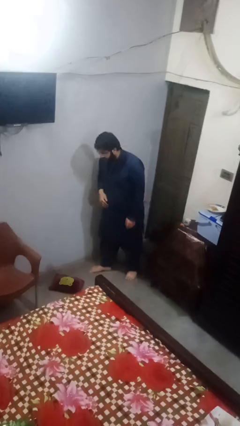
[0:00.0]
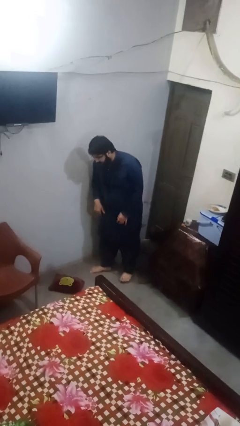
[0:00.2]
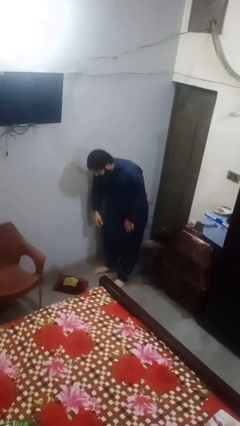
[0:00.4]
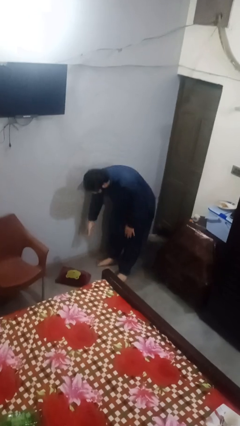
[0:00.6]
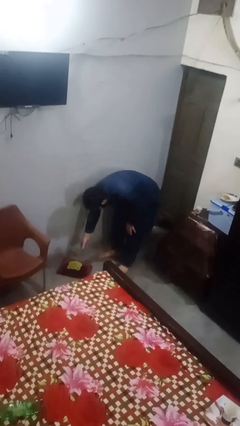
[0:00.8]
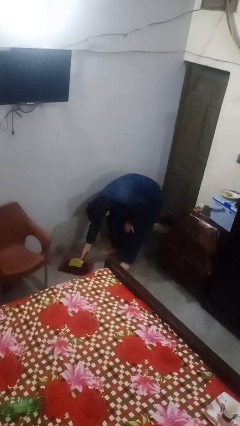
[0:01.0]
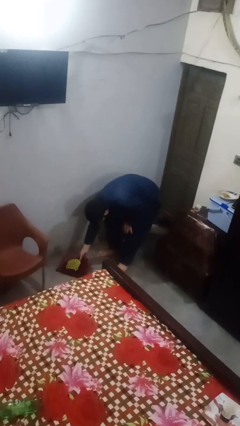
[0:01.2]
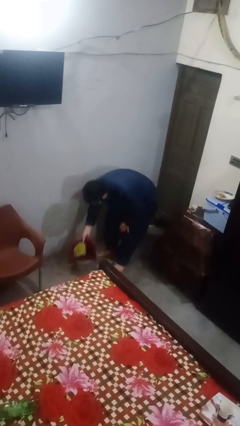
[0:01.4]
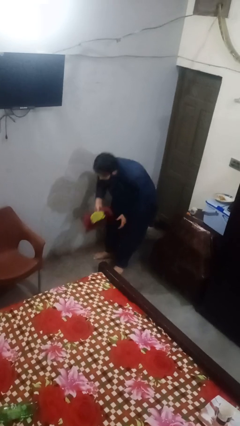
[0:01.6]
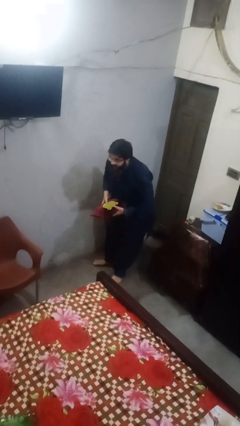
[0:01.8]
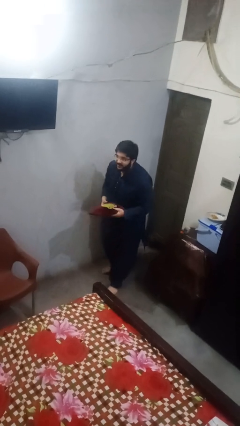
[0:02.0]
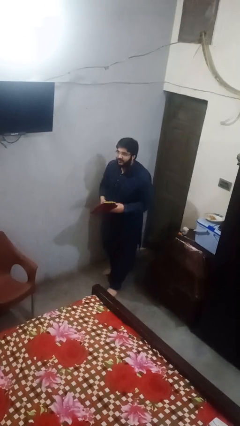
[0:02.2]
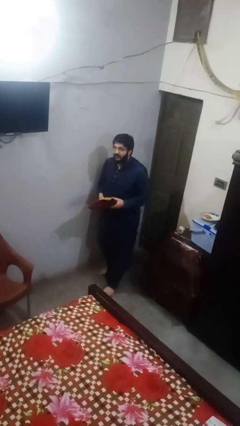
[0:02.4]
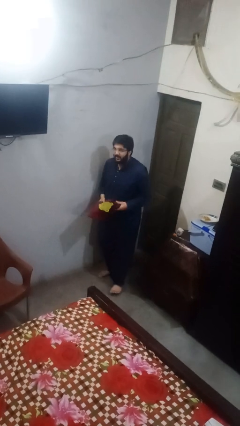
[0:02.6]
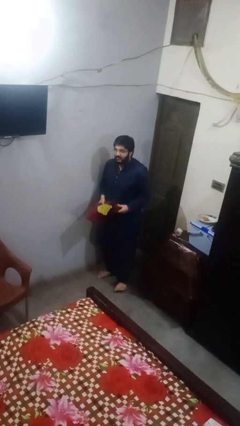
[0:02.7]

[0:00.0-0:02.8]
person picks up object from floor

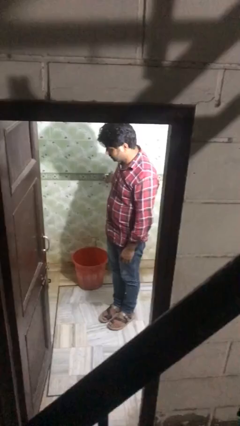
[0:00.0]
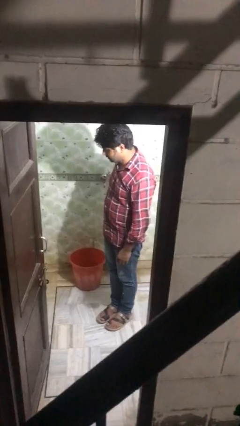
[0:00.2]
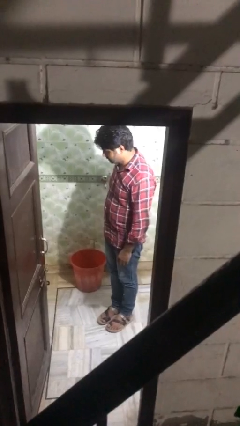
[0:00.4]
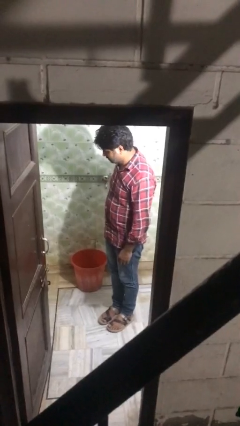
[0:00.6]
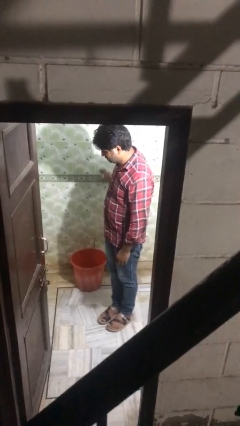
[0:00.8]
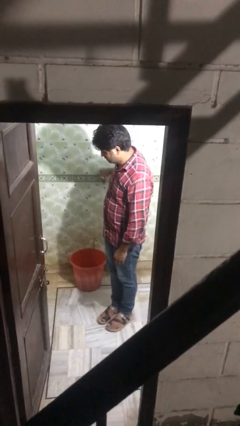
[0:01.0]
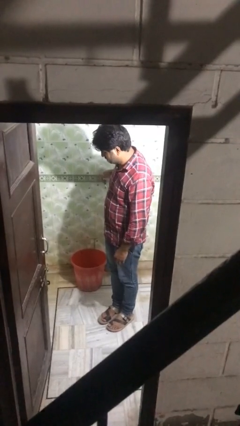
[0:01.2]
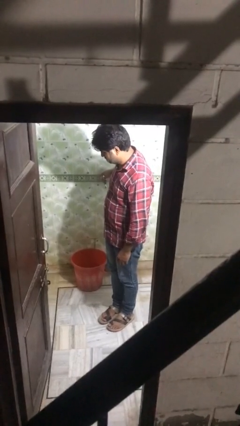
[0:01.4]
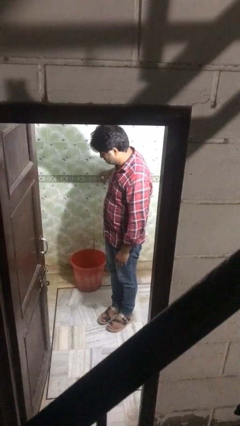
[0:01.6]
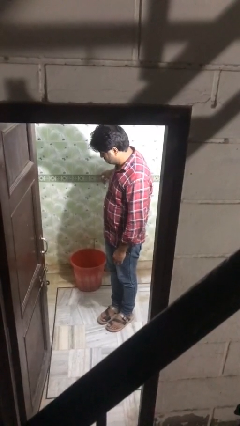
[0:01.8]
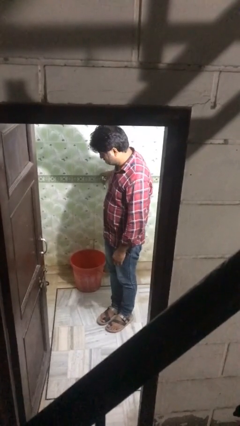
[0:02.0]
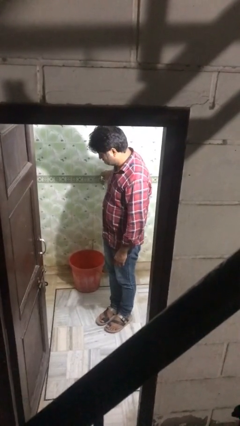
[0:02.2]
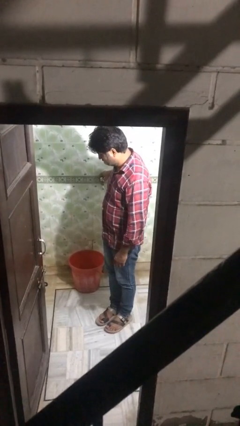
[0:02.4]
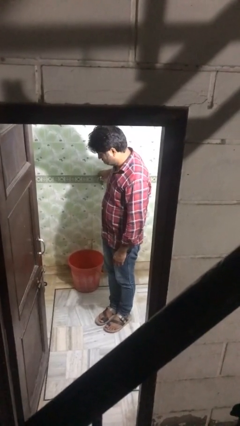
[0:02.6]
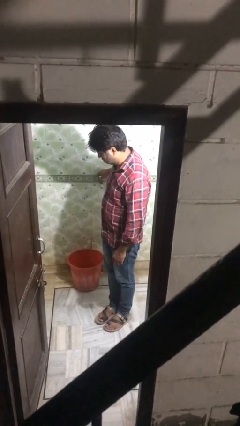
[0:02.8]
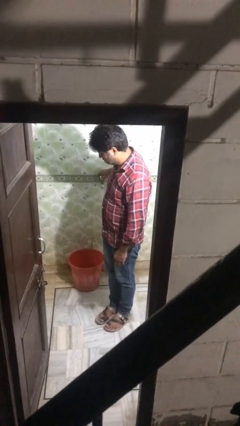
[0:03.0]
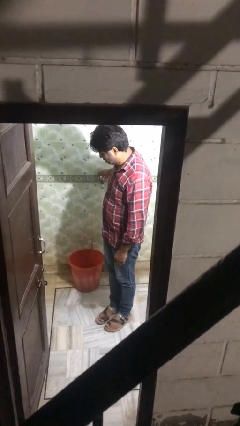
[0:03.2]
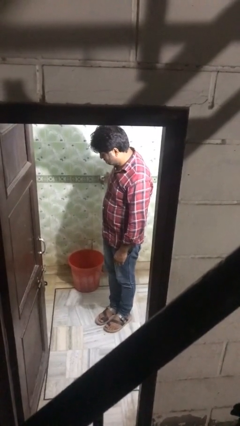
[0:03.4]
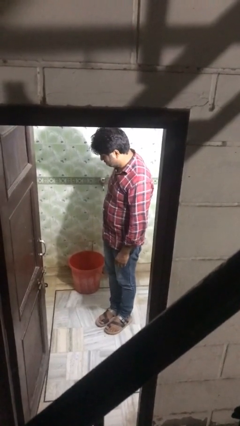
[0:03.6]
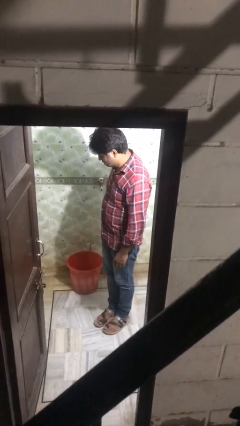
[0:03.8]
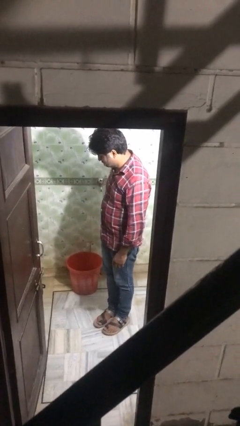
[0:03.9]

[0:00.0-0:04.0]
person turns on faucet

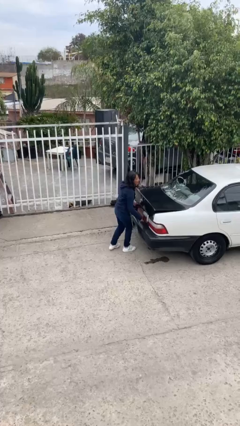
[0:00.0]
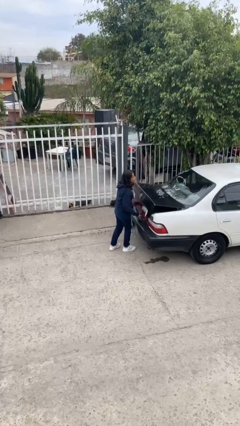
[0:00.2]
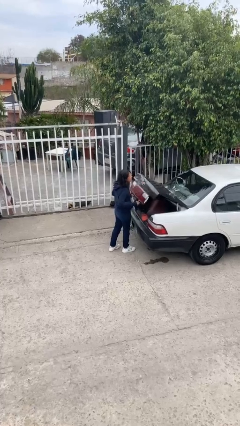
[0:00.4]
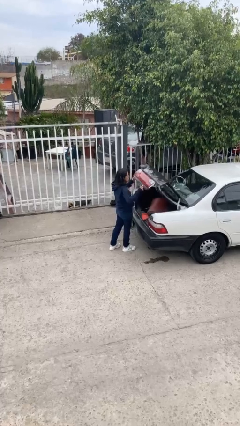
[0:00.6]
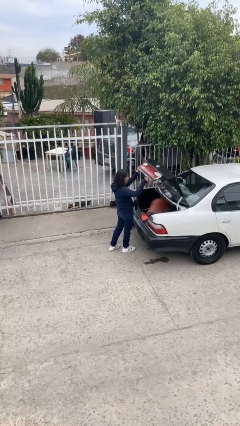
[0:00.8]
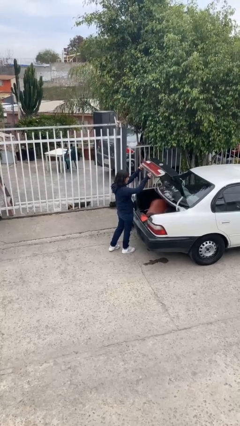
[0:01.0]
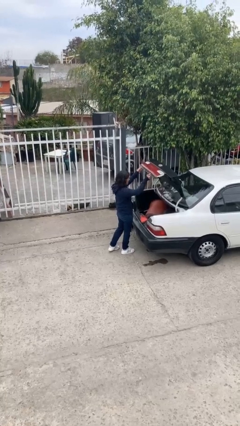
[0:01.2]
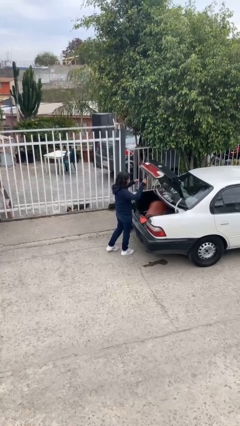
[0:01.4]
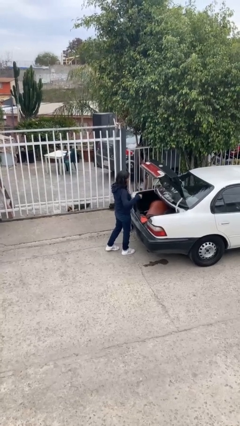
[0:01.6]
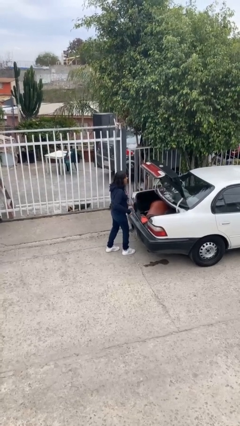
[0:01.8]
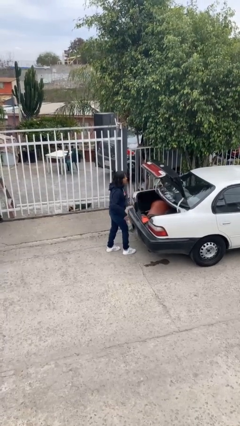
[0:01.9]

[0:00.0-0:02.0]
person opens car trunk

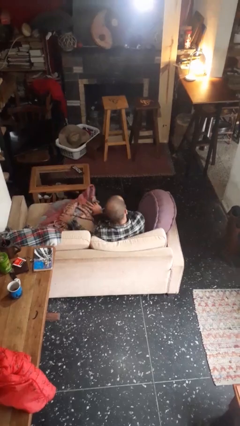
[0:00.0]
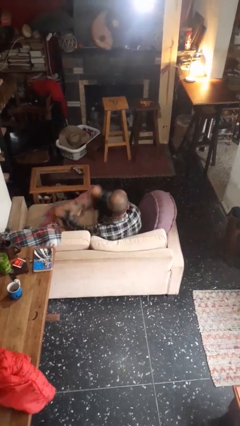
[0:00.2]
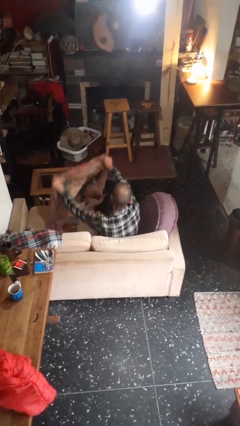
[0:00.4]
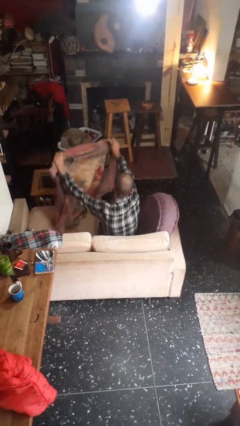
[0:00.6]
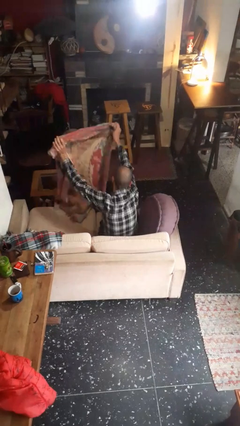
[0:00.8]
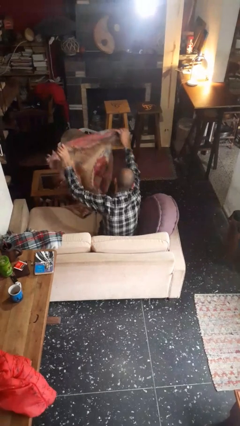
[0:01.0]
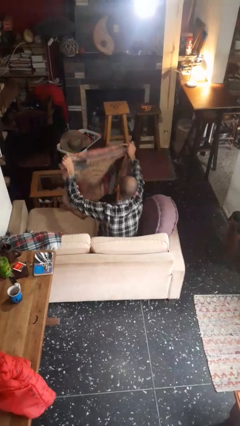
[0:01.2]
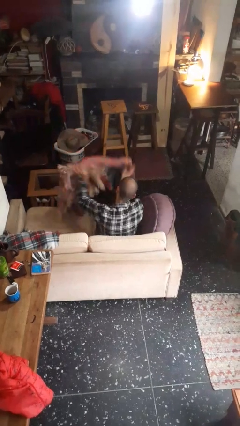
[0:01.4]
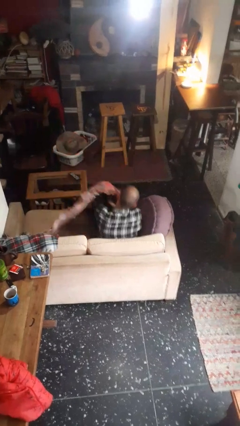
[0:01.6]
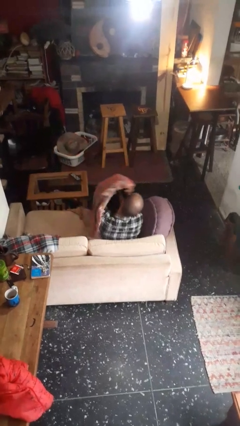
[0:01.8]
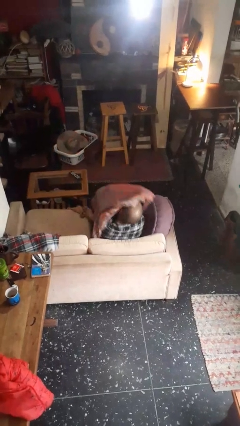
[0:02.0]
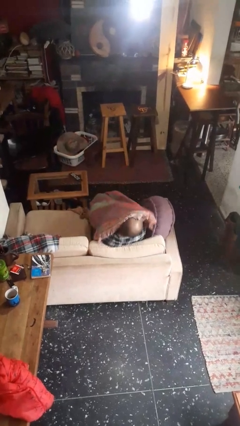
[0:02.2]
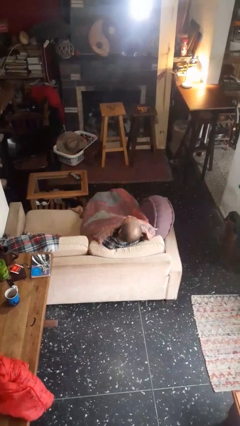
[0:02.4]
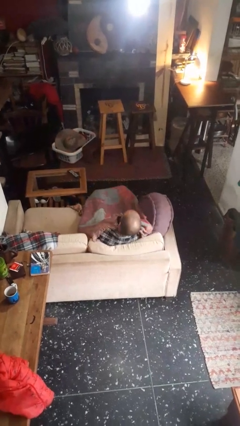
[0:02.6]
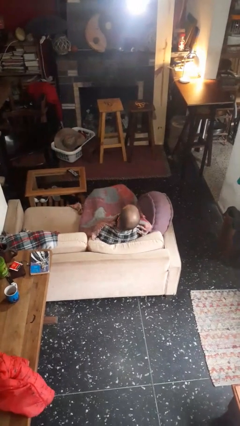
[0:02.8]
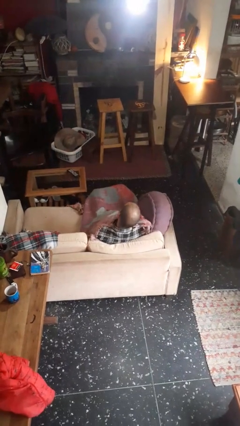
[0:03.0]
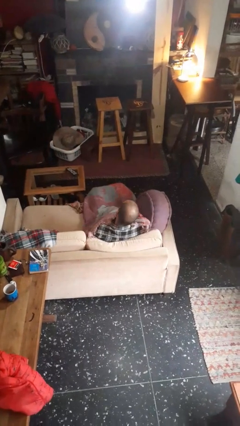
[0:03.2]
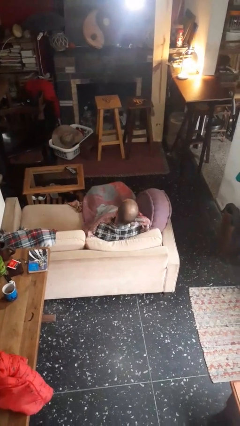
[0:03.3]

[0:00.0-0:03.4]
person covers with blanket

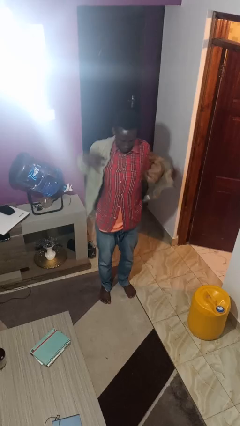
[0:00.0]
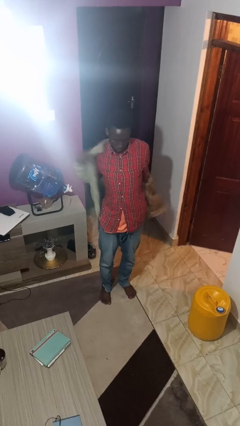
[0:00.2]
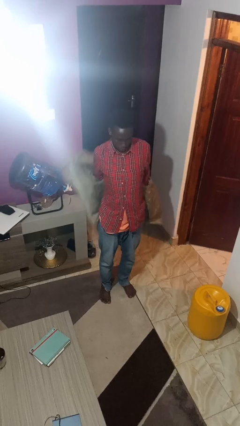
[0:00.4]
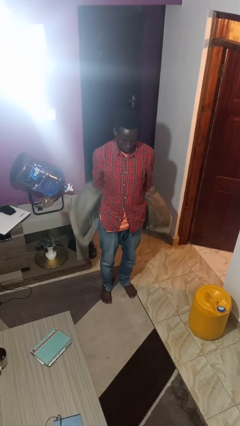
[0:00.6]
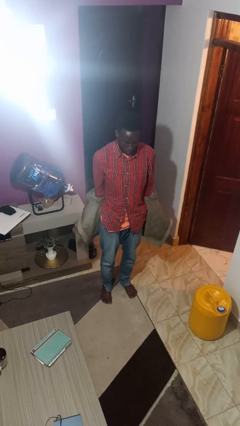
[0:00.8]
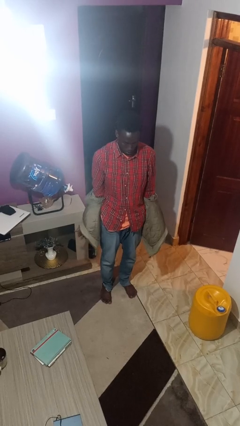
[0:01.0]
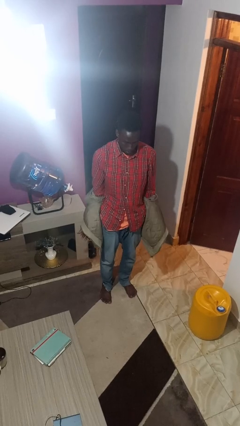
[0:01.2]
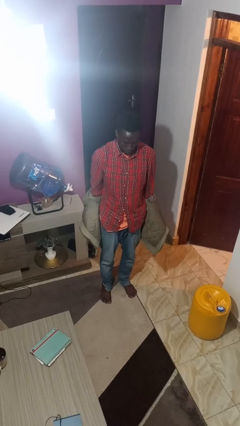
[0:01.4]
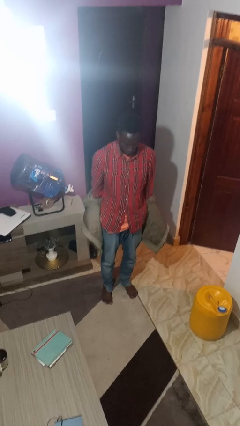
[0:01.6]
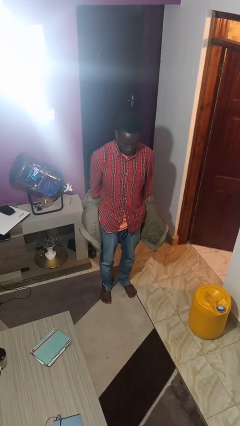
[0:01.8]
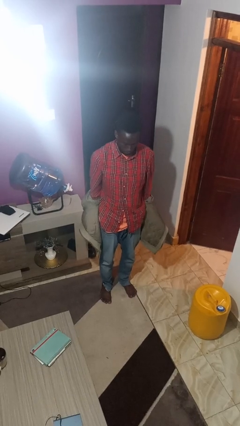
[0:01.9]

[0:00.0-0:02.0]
person takes off jacket

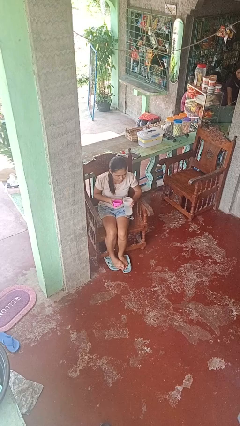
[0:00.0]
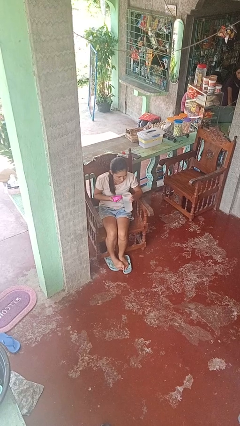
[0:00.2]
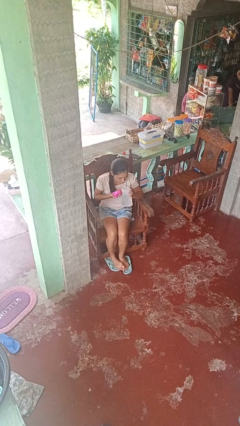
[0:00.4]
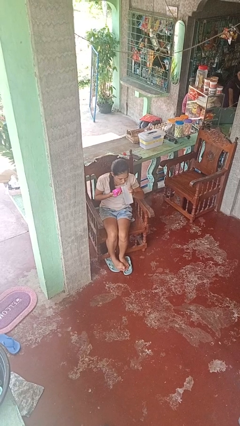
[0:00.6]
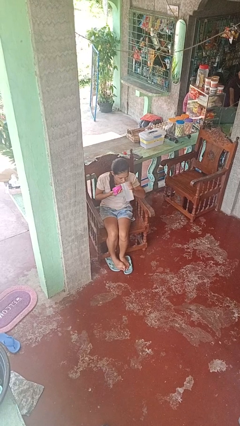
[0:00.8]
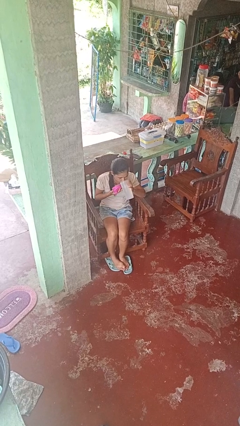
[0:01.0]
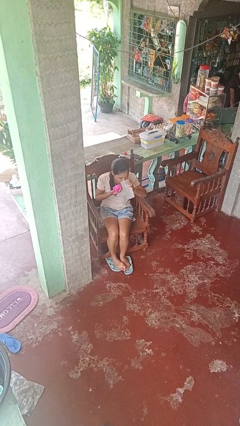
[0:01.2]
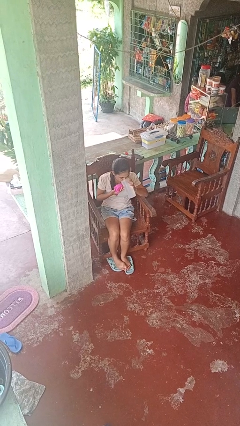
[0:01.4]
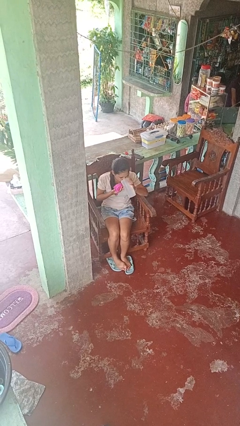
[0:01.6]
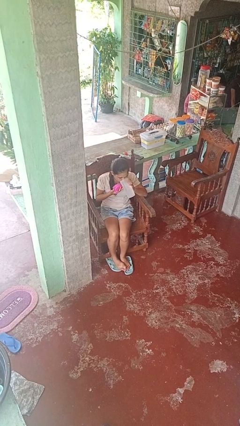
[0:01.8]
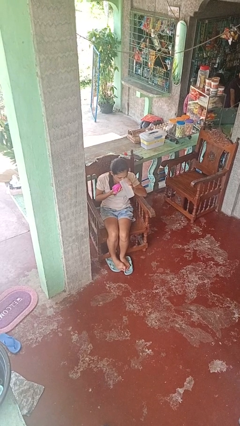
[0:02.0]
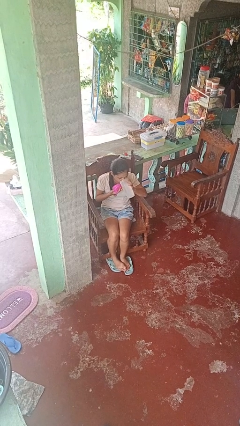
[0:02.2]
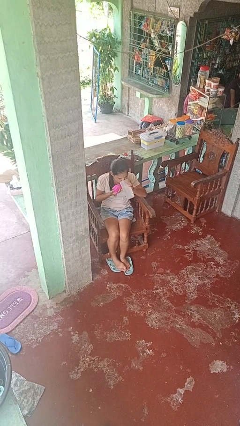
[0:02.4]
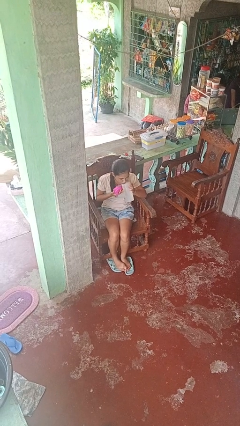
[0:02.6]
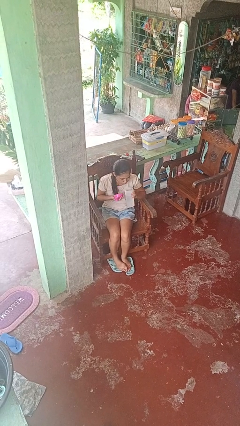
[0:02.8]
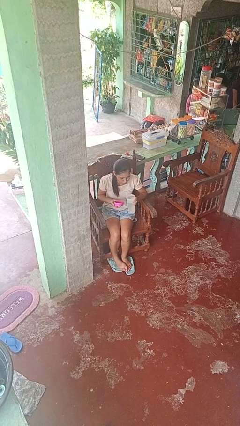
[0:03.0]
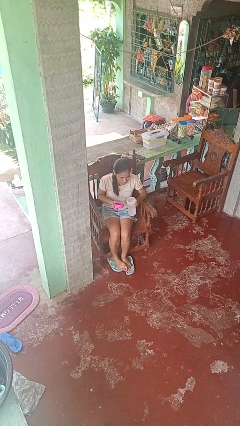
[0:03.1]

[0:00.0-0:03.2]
person drinks from bottle

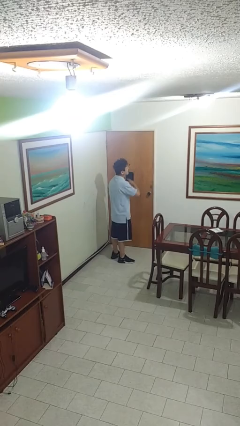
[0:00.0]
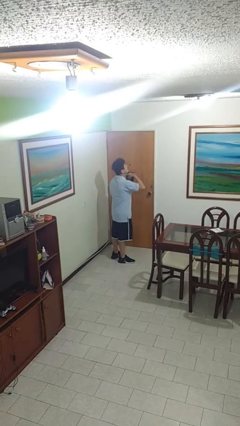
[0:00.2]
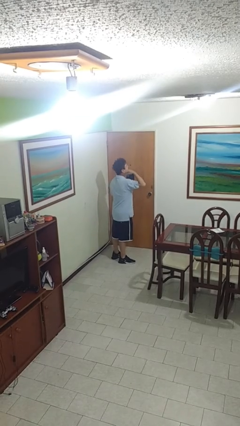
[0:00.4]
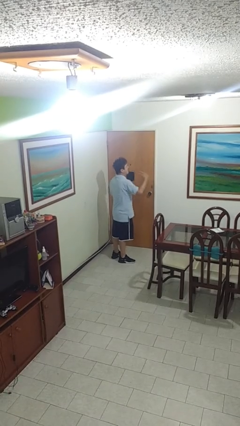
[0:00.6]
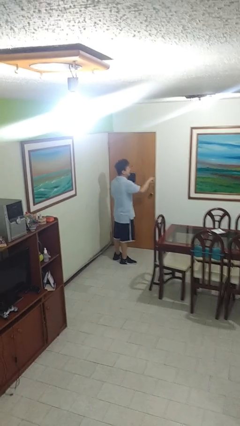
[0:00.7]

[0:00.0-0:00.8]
person gestures cut
